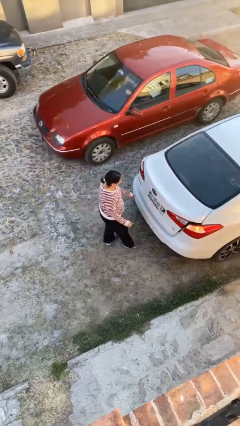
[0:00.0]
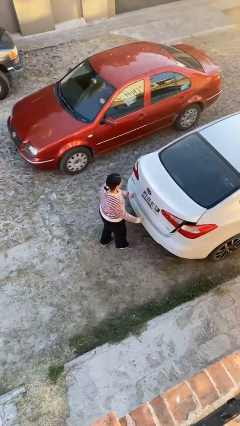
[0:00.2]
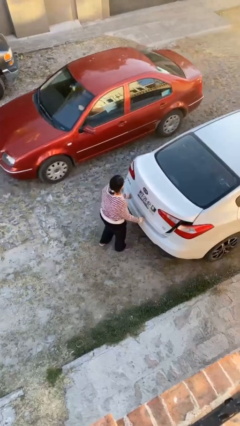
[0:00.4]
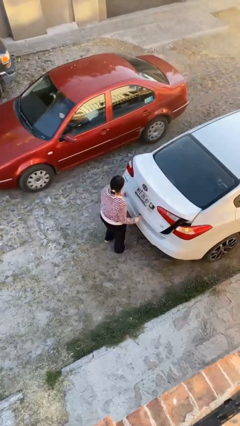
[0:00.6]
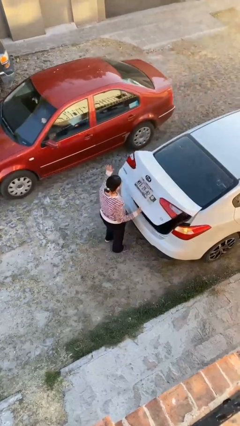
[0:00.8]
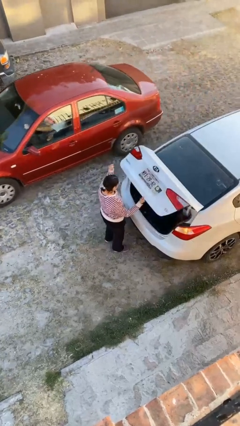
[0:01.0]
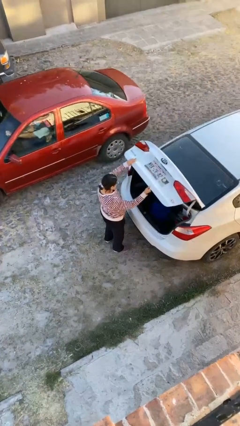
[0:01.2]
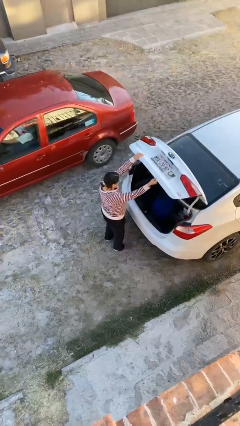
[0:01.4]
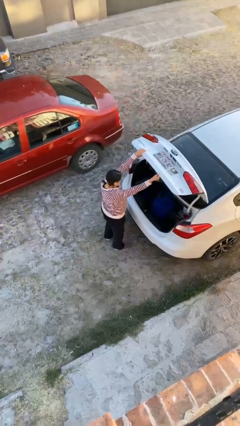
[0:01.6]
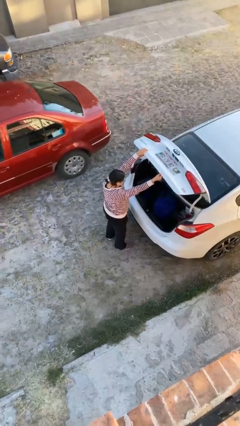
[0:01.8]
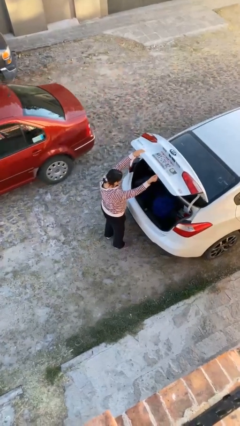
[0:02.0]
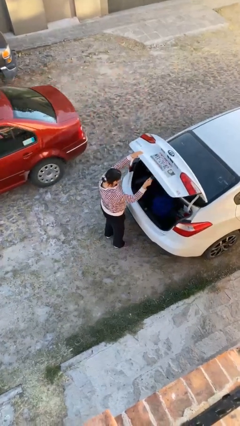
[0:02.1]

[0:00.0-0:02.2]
person opens car trunk

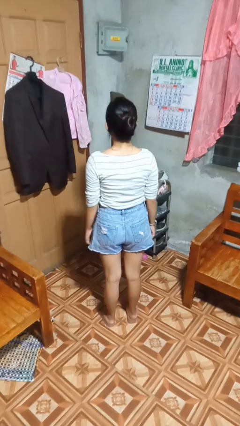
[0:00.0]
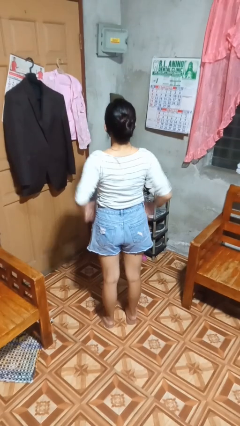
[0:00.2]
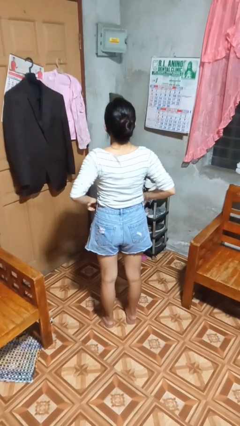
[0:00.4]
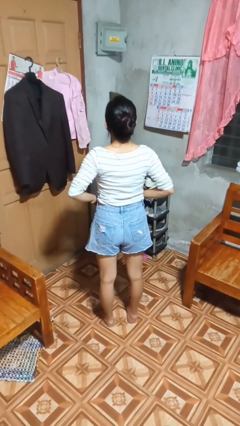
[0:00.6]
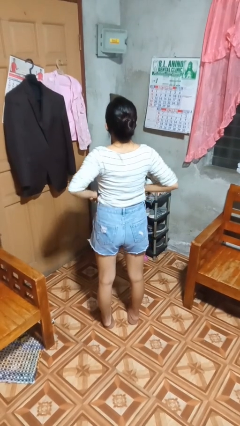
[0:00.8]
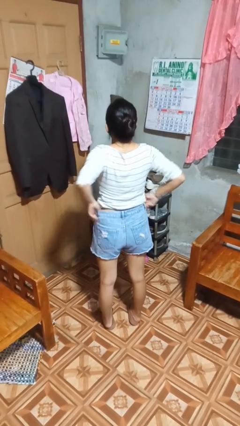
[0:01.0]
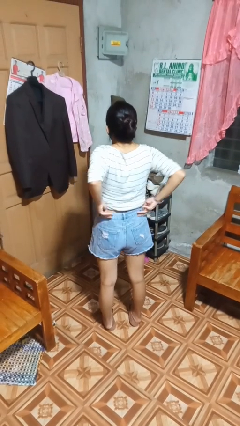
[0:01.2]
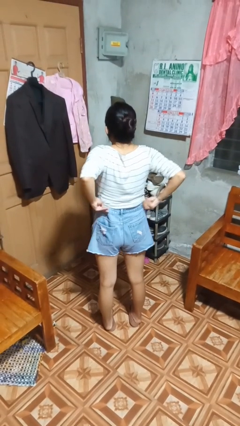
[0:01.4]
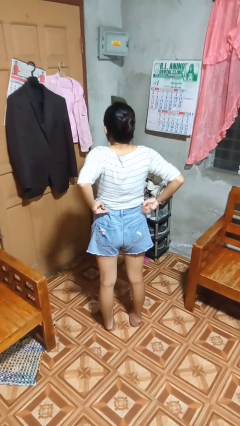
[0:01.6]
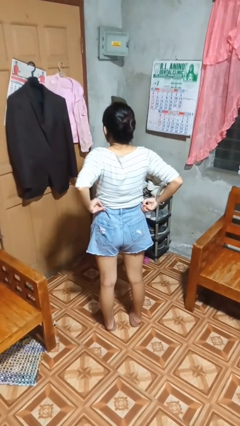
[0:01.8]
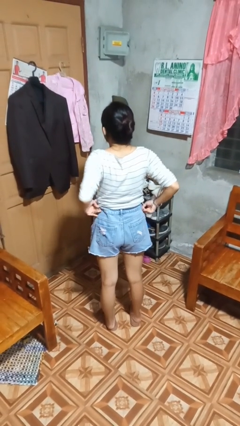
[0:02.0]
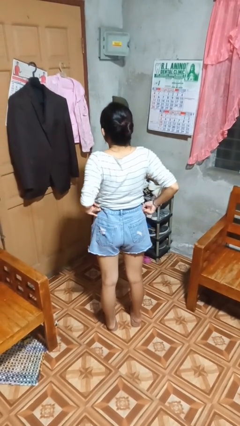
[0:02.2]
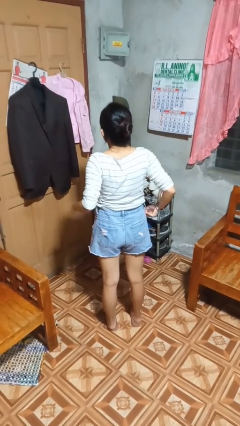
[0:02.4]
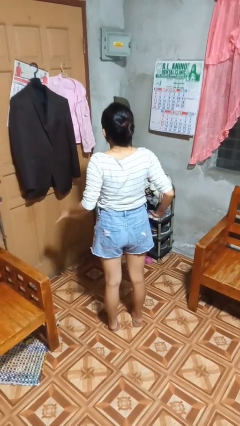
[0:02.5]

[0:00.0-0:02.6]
person hikes up pants

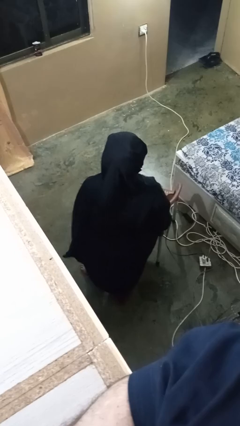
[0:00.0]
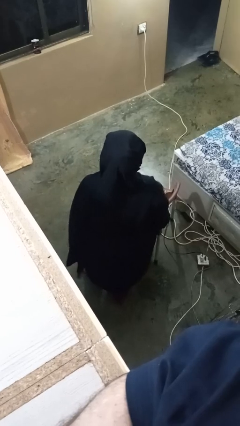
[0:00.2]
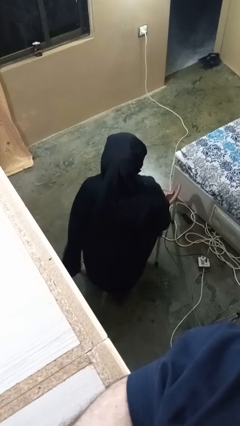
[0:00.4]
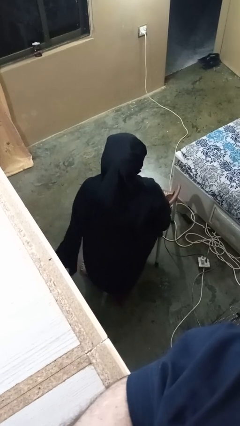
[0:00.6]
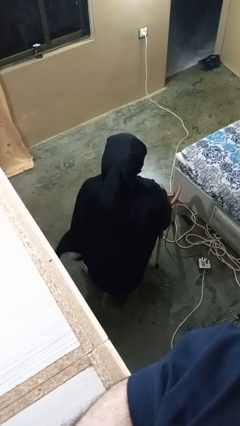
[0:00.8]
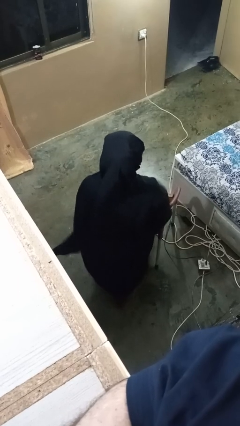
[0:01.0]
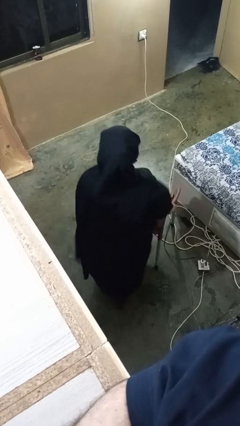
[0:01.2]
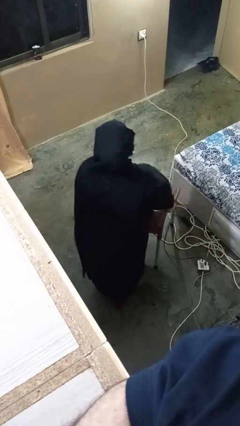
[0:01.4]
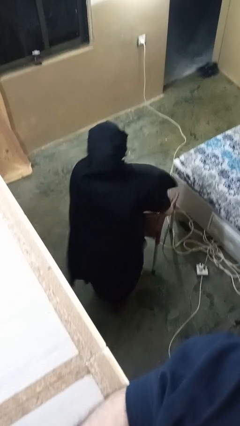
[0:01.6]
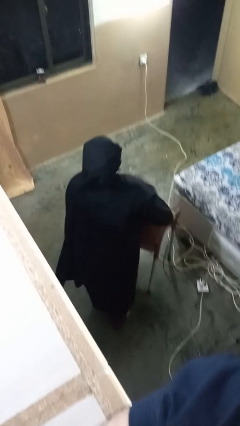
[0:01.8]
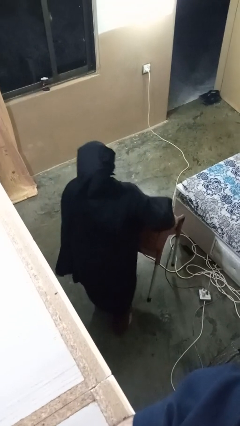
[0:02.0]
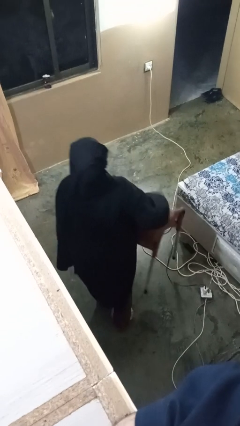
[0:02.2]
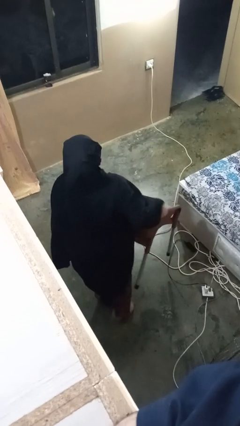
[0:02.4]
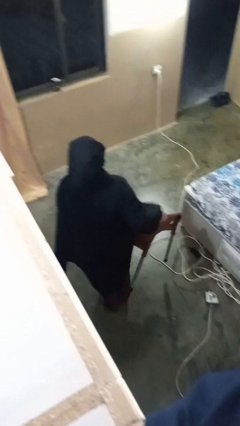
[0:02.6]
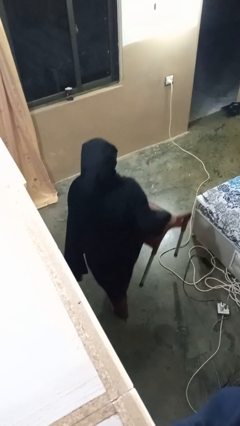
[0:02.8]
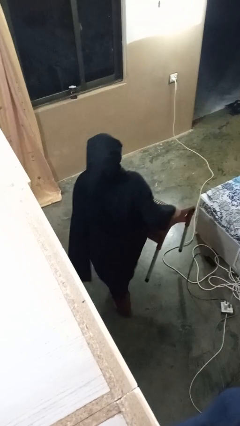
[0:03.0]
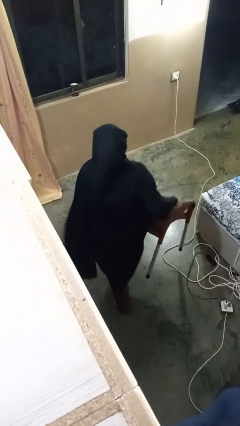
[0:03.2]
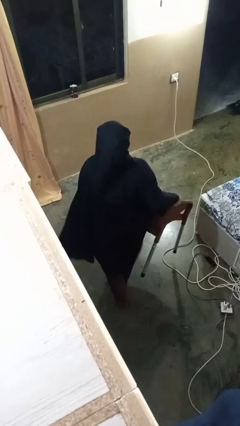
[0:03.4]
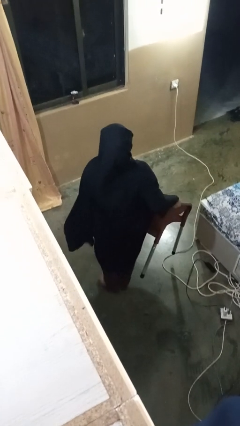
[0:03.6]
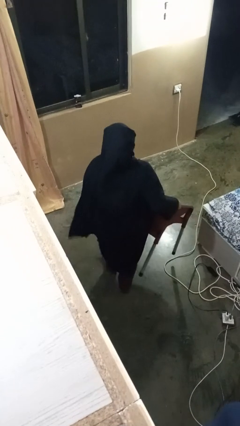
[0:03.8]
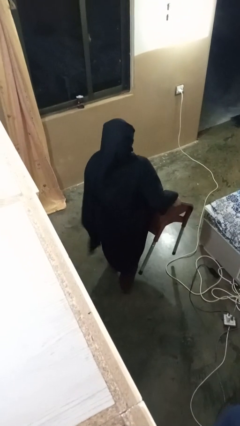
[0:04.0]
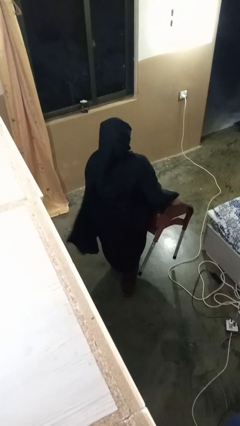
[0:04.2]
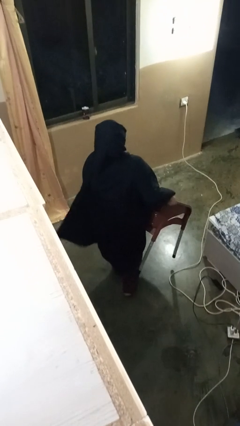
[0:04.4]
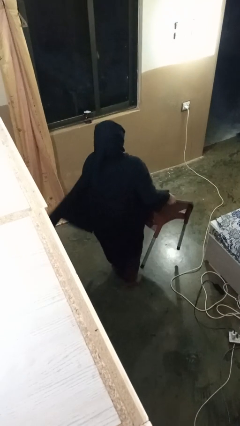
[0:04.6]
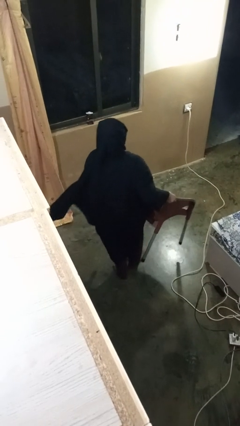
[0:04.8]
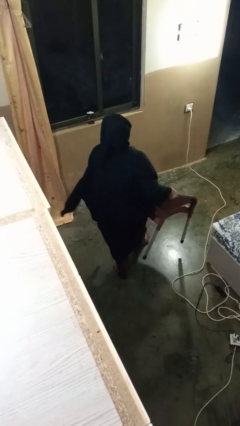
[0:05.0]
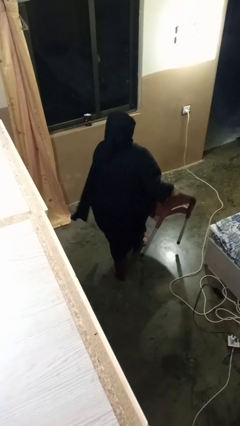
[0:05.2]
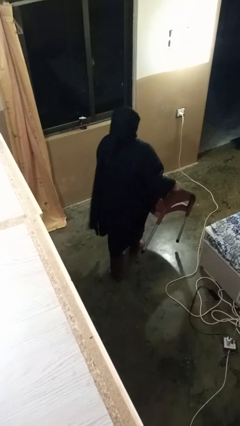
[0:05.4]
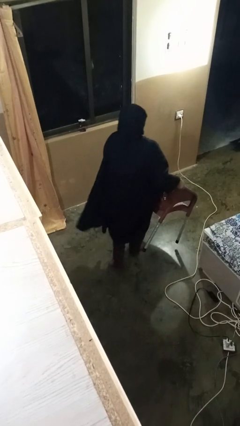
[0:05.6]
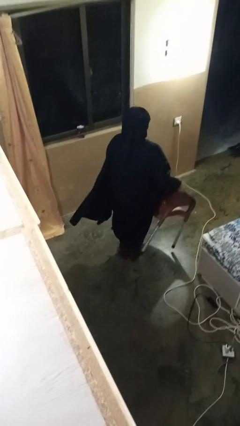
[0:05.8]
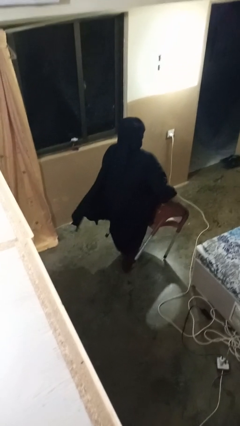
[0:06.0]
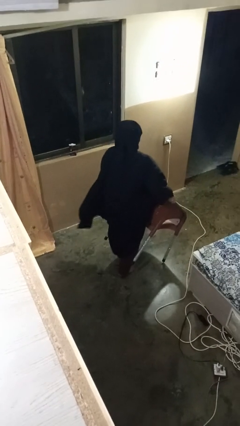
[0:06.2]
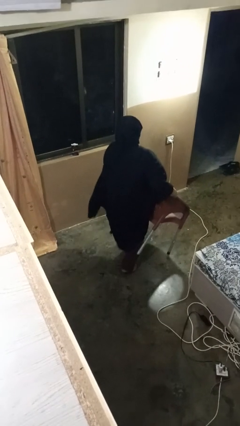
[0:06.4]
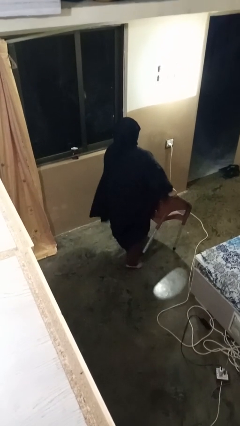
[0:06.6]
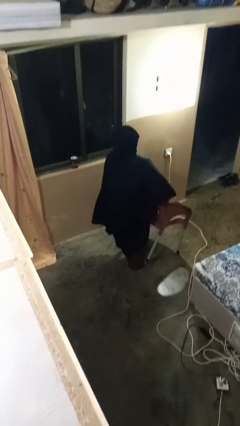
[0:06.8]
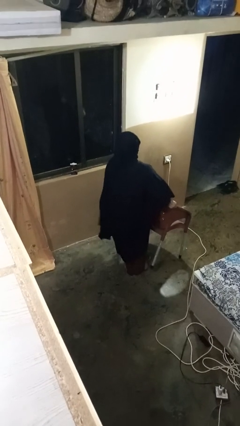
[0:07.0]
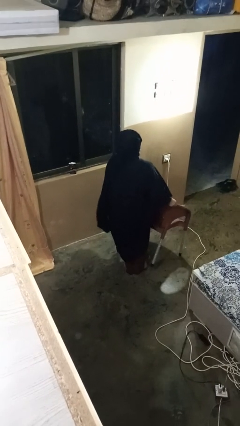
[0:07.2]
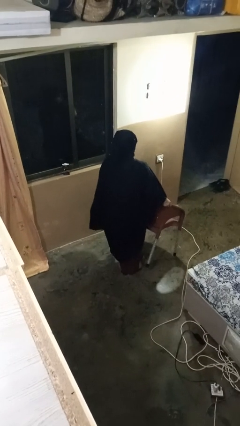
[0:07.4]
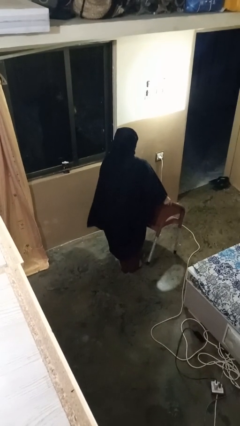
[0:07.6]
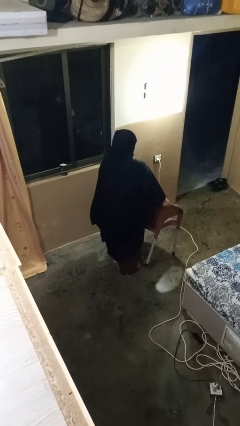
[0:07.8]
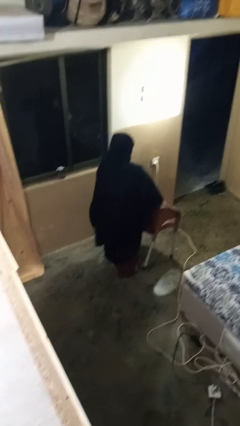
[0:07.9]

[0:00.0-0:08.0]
person carries furniture

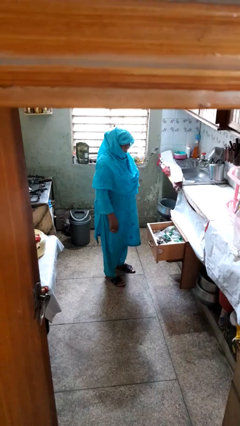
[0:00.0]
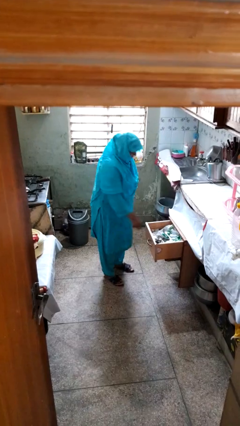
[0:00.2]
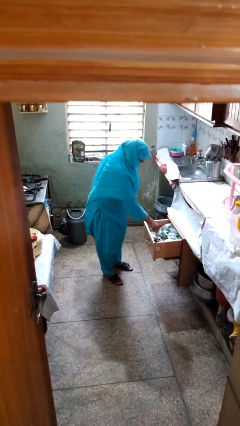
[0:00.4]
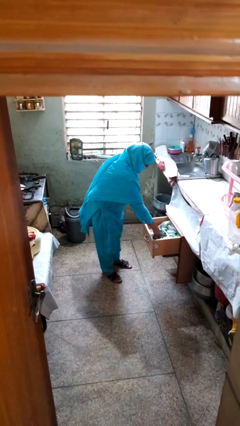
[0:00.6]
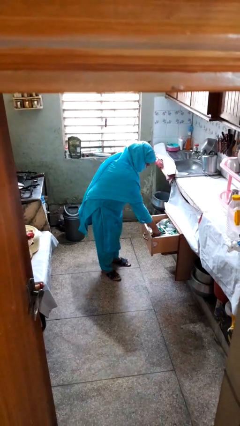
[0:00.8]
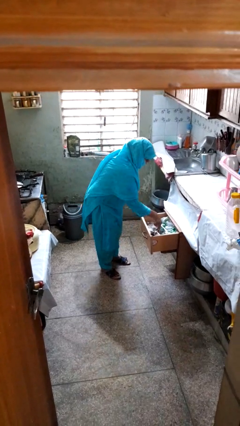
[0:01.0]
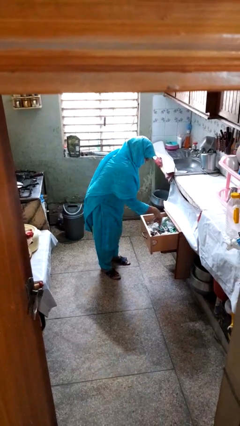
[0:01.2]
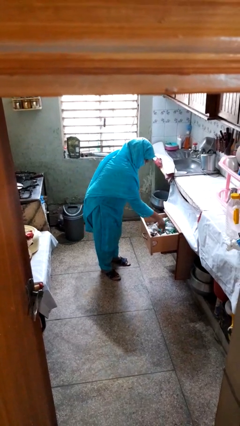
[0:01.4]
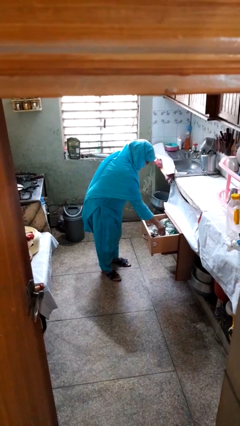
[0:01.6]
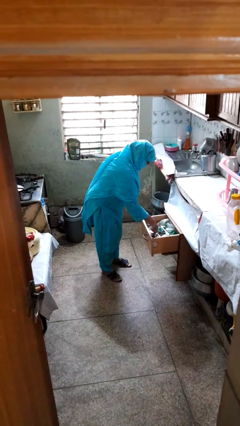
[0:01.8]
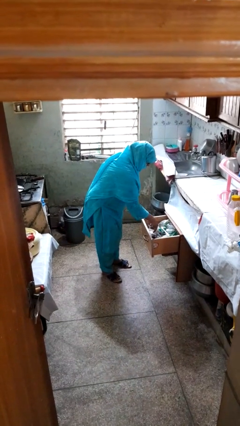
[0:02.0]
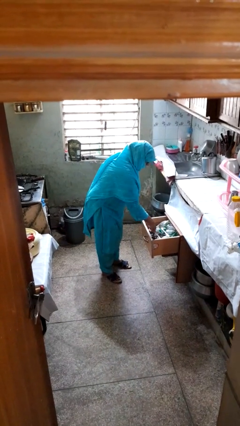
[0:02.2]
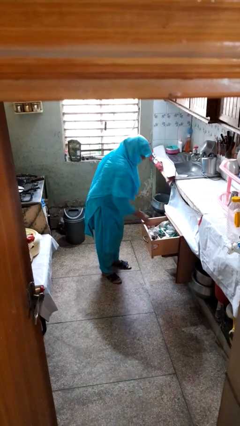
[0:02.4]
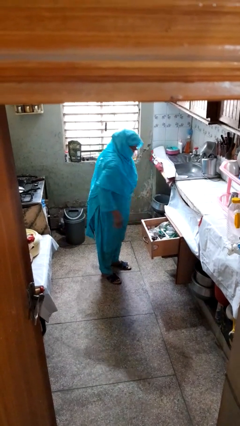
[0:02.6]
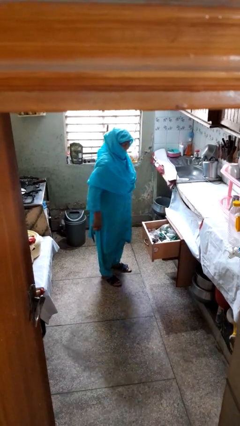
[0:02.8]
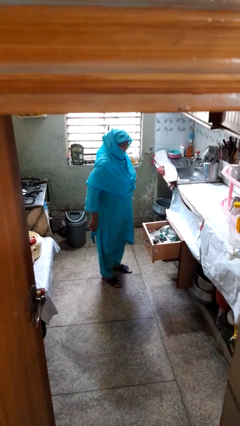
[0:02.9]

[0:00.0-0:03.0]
person searches in kitchen drawer

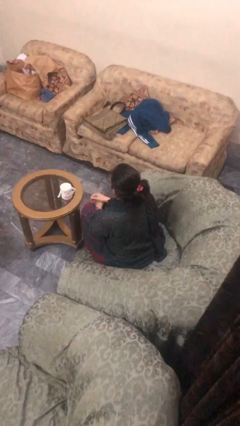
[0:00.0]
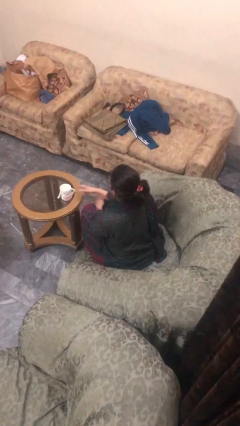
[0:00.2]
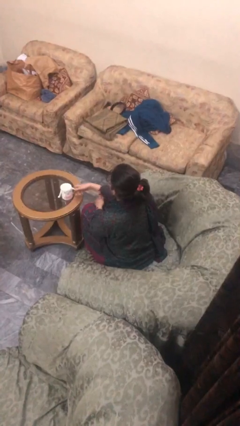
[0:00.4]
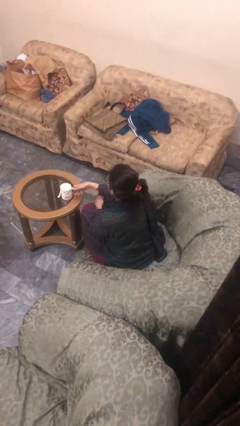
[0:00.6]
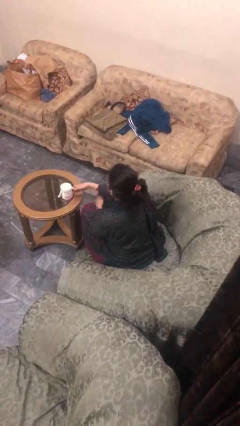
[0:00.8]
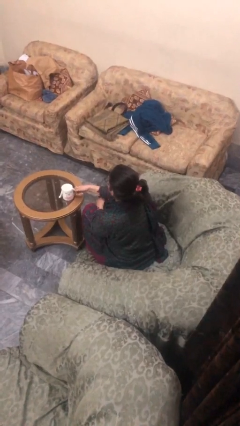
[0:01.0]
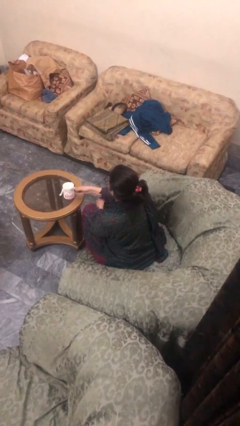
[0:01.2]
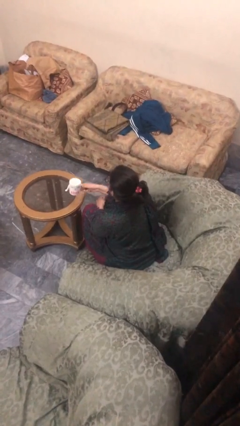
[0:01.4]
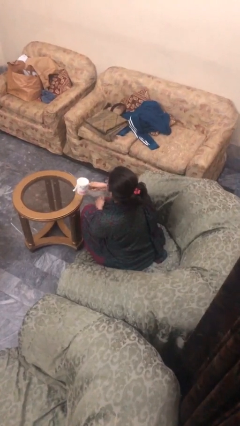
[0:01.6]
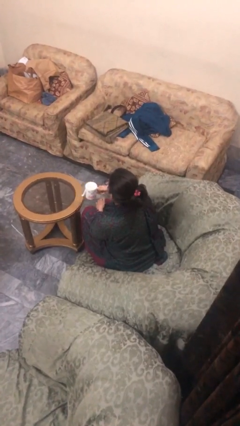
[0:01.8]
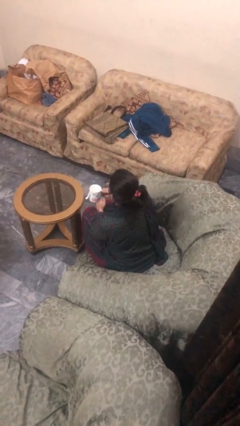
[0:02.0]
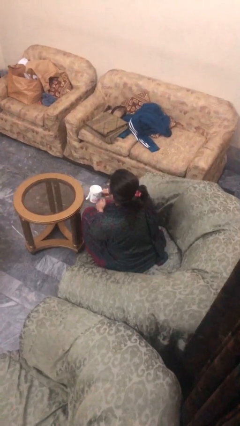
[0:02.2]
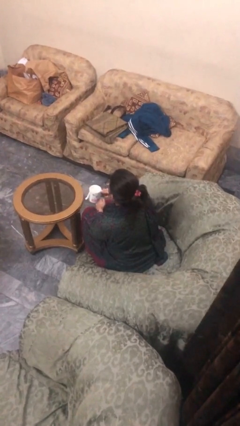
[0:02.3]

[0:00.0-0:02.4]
person picks up object from table
